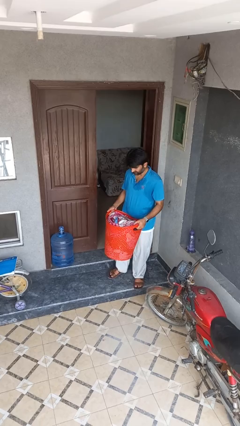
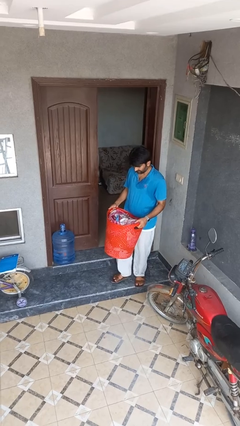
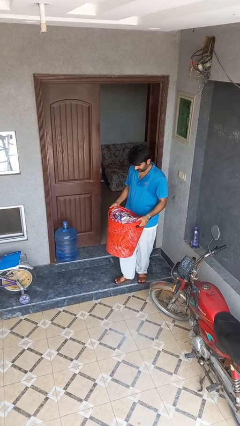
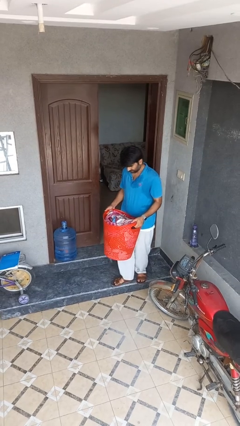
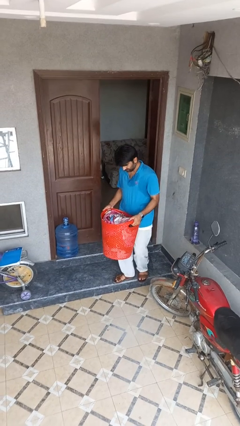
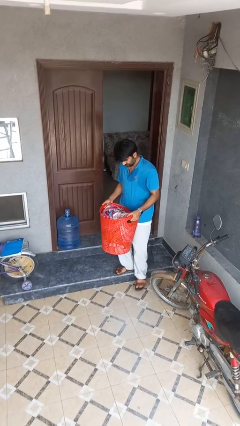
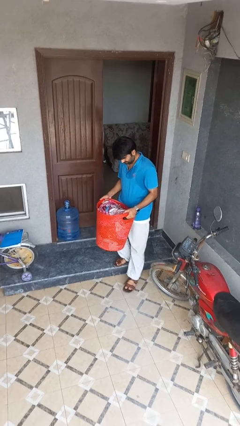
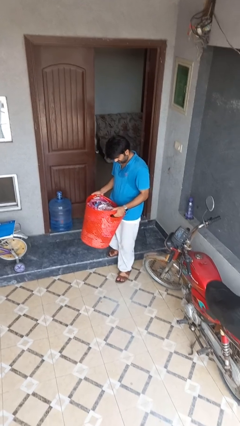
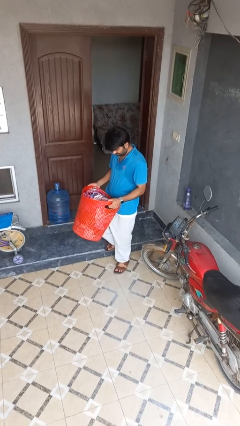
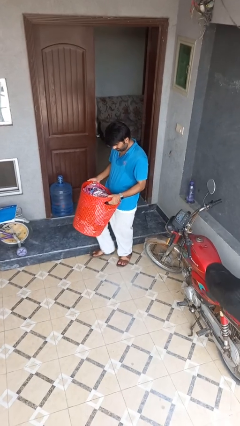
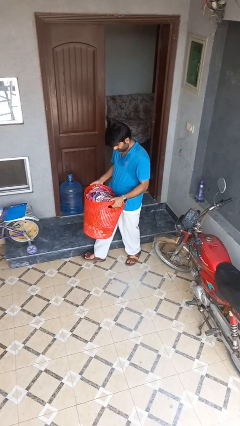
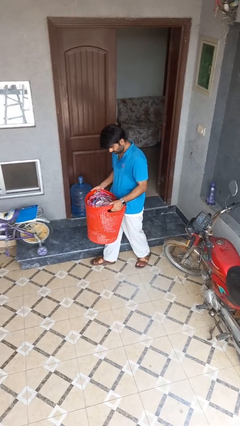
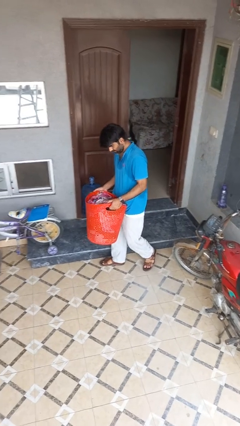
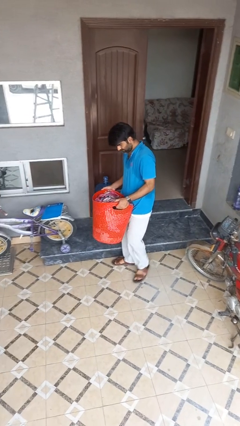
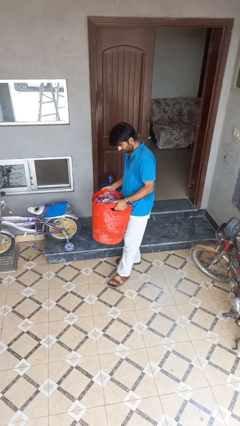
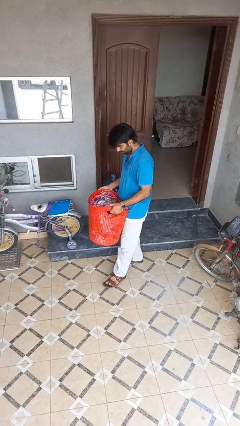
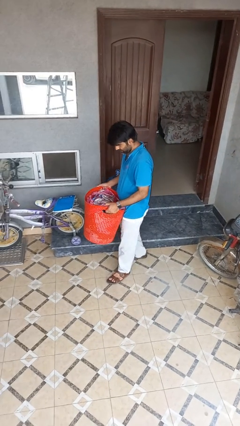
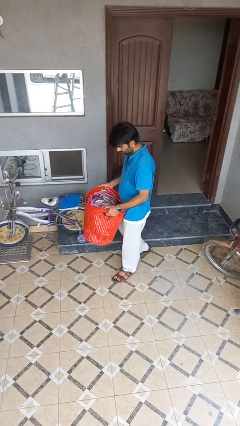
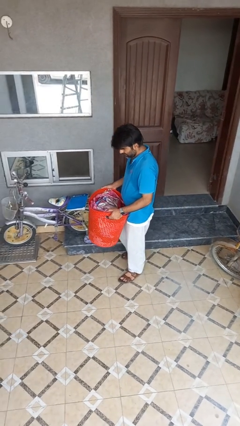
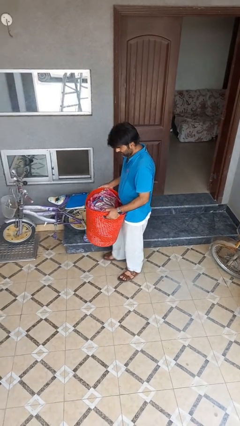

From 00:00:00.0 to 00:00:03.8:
person carries laundry basket

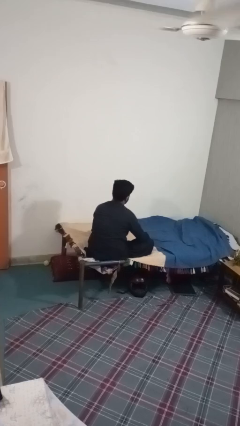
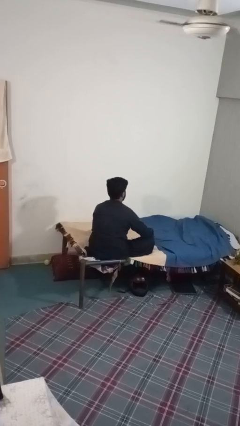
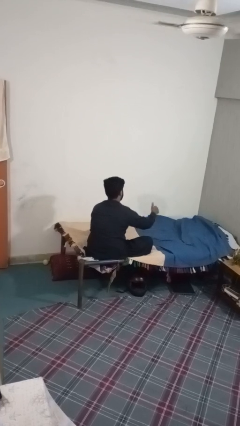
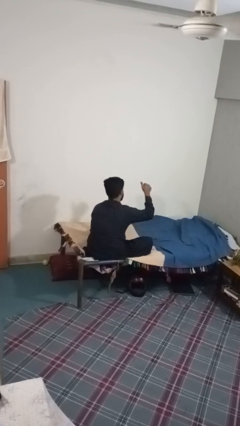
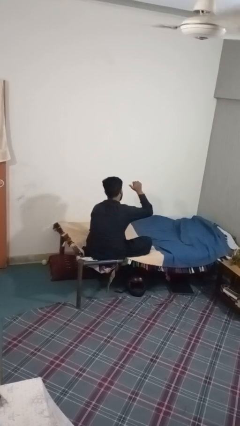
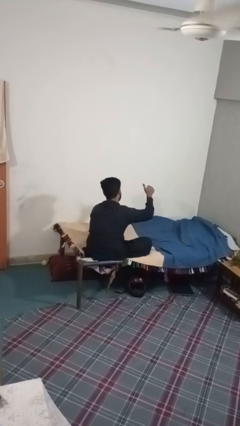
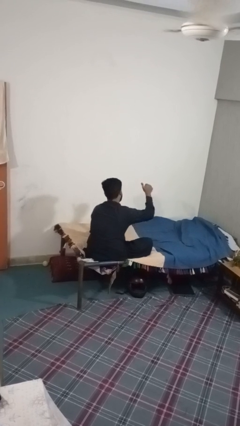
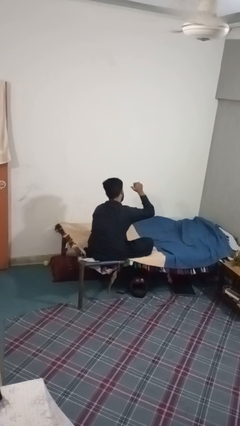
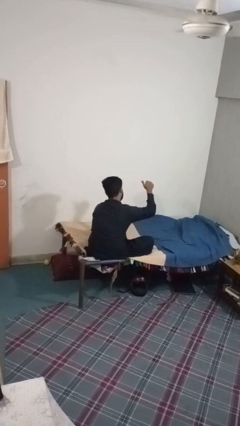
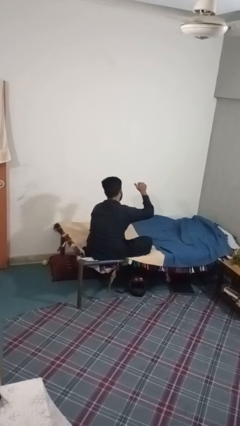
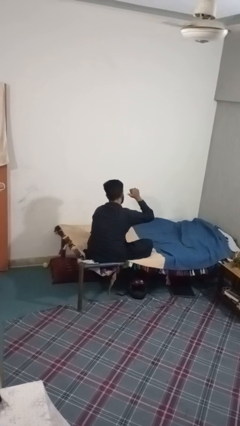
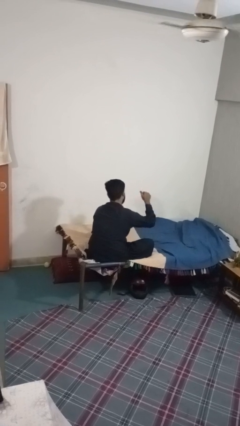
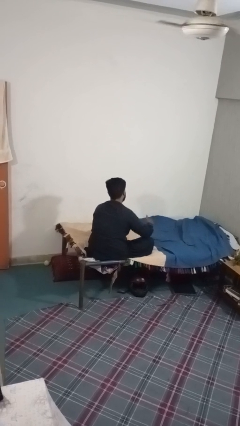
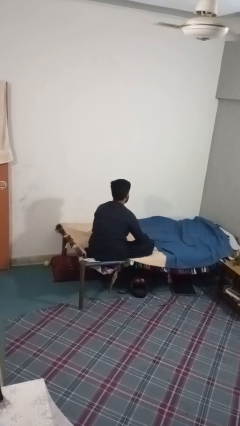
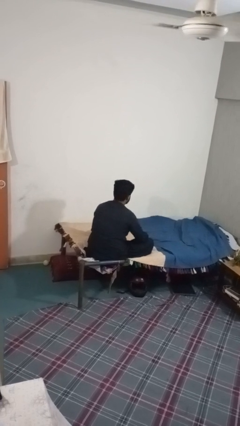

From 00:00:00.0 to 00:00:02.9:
person gestures behind me

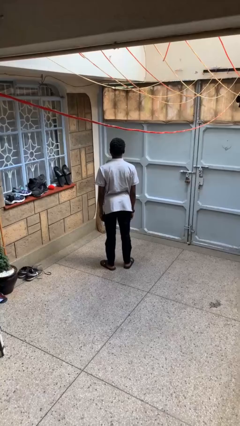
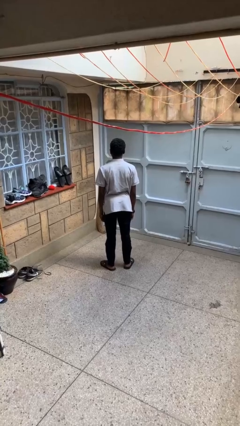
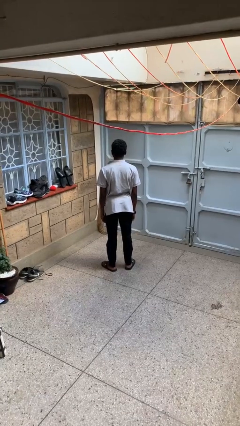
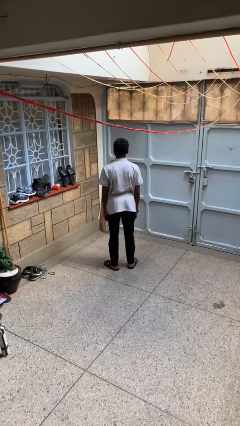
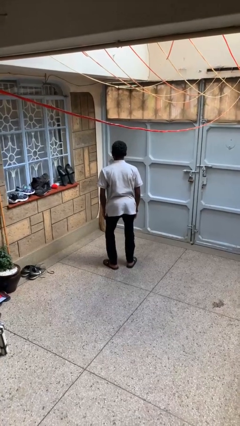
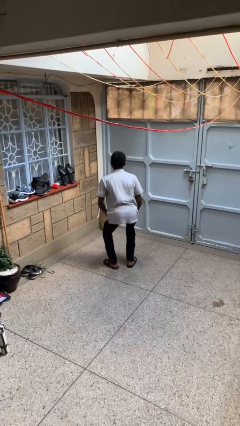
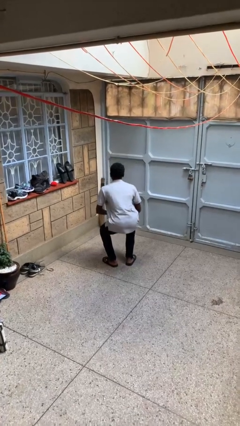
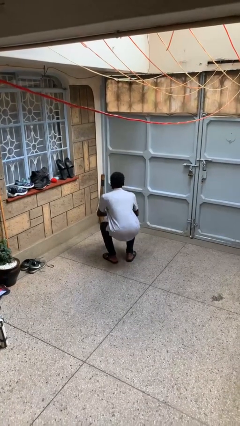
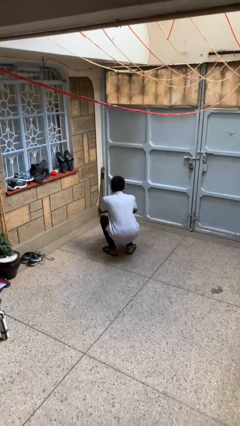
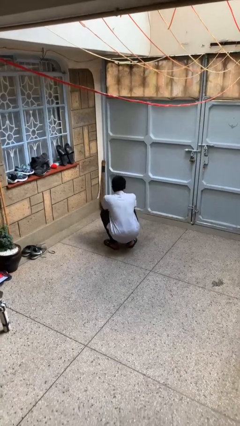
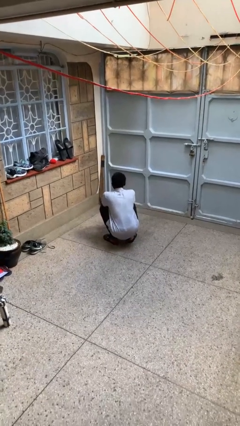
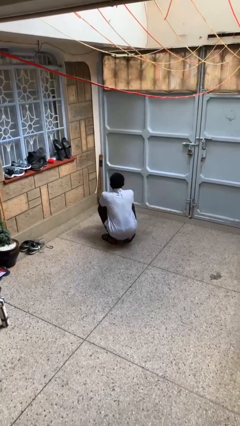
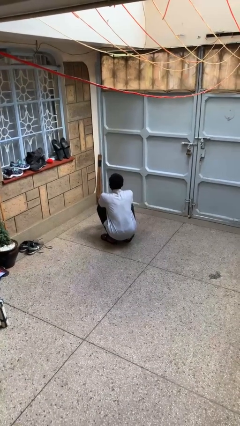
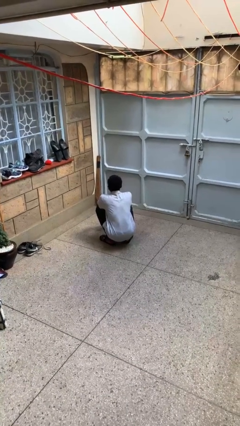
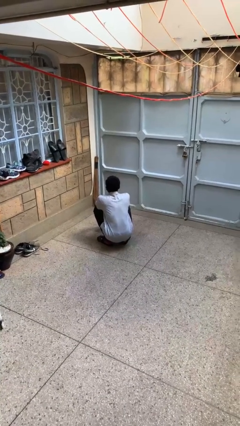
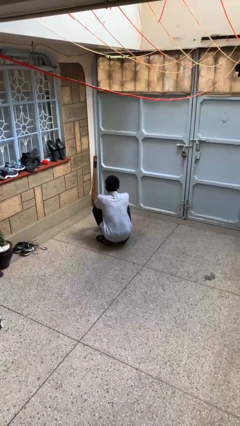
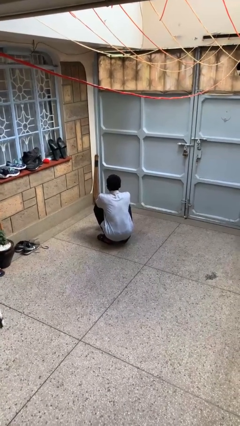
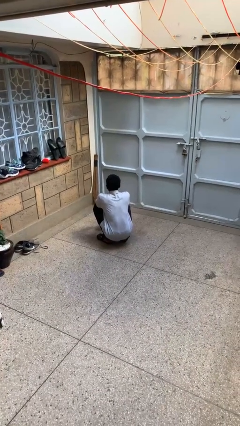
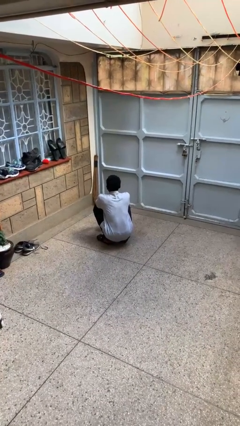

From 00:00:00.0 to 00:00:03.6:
person squats

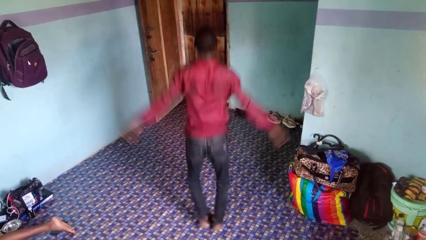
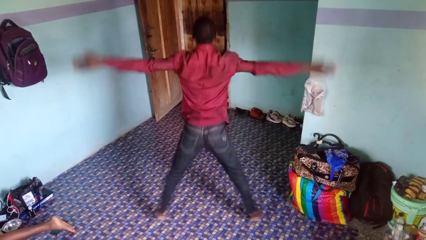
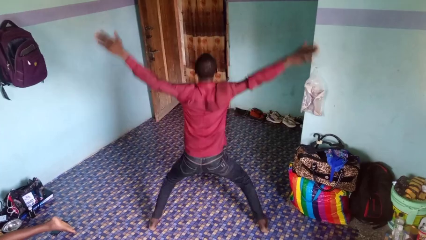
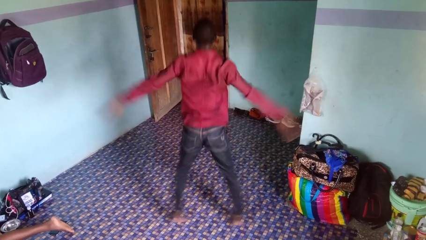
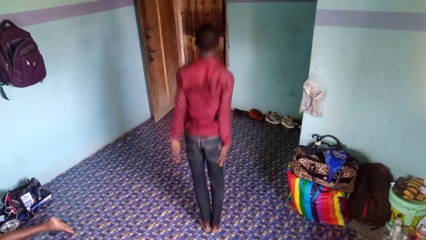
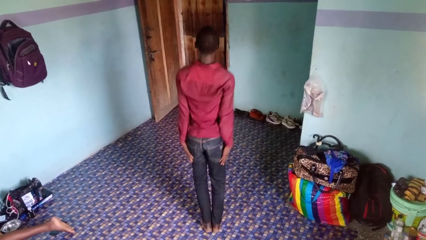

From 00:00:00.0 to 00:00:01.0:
person exercises with jumping jacks

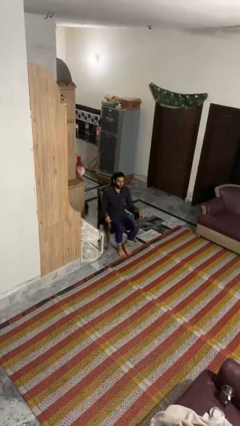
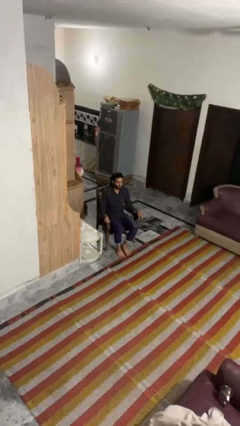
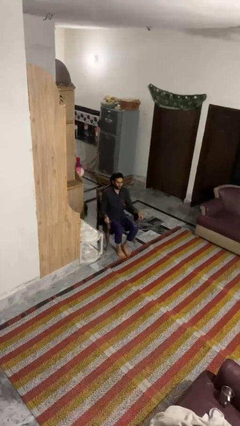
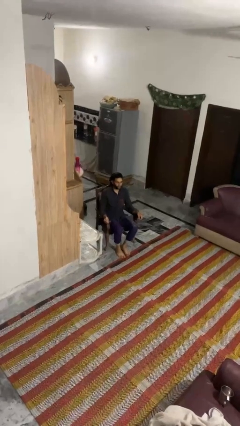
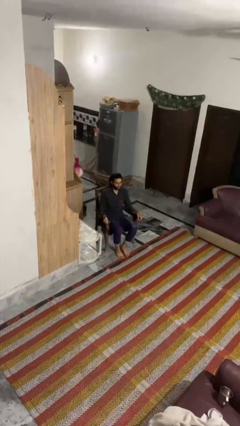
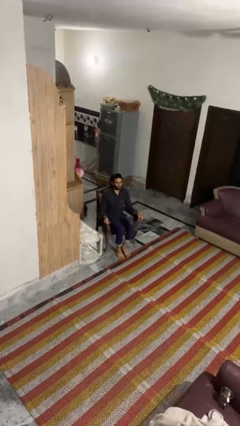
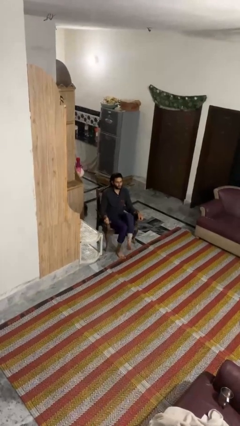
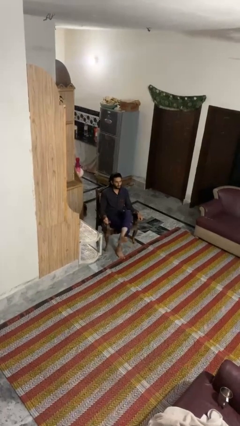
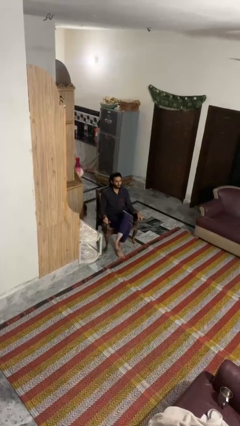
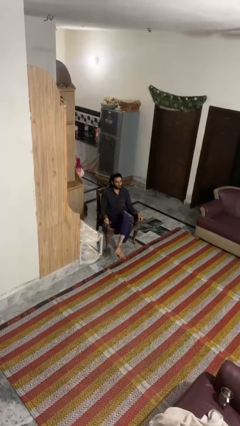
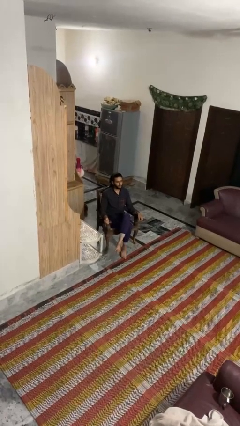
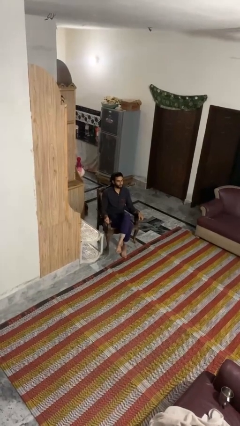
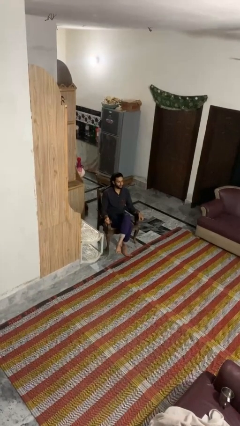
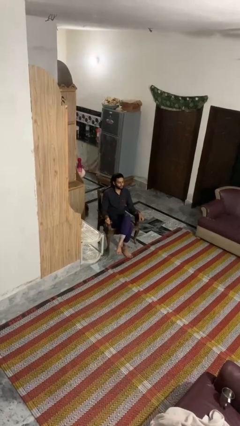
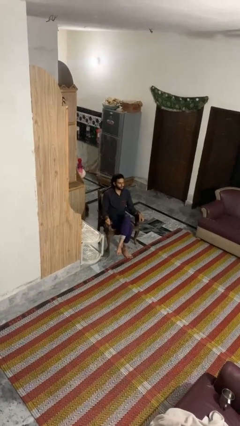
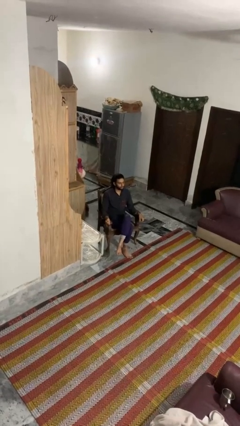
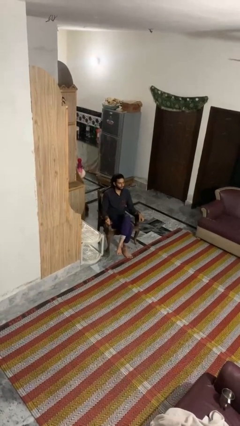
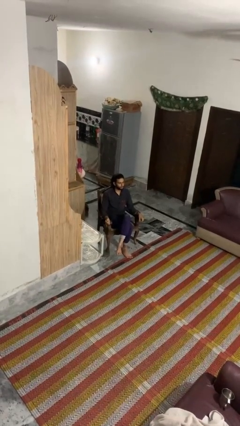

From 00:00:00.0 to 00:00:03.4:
person crosses legs

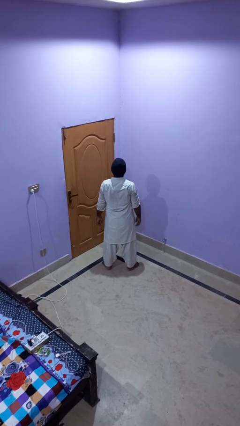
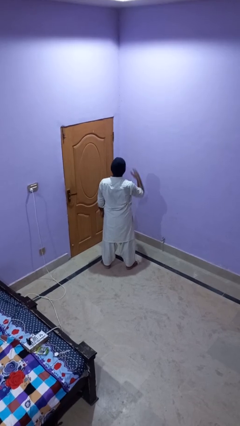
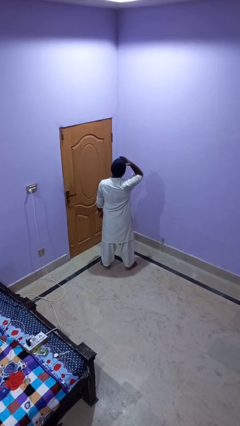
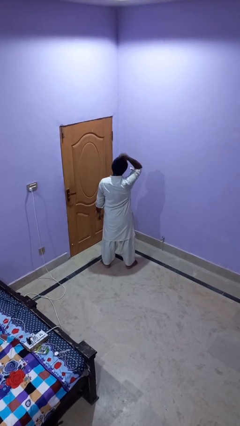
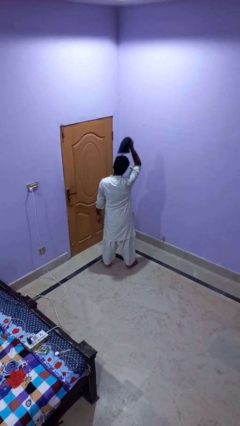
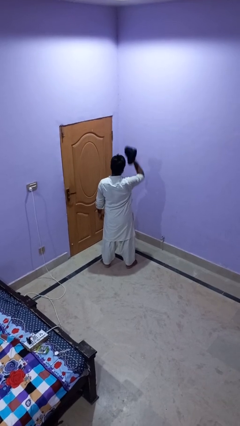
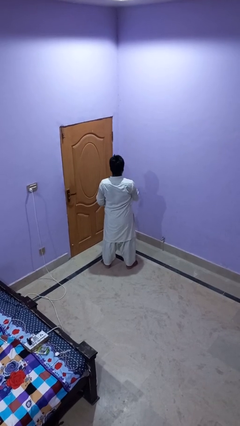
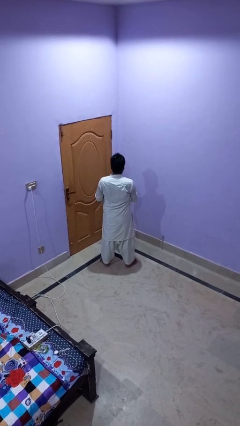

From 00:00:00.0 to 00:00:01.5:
person takes off hat

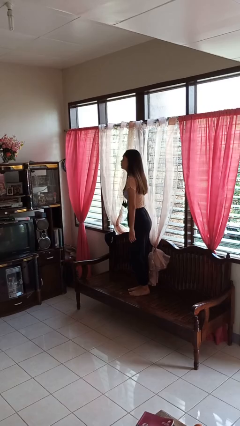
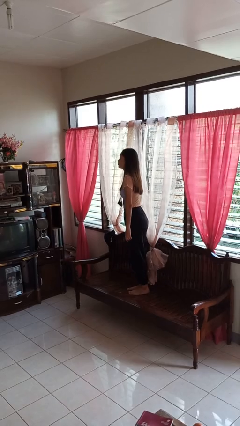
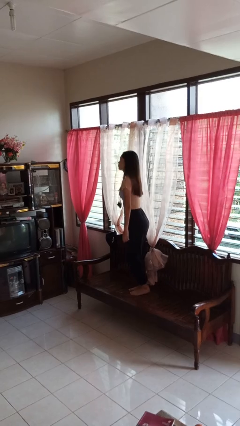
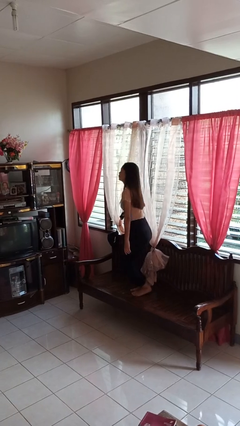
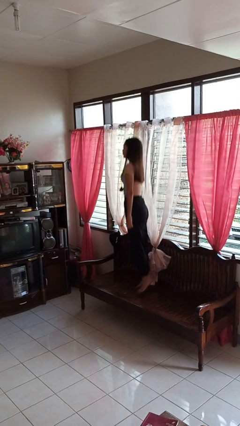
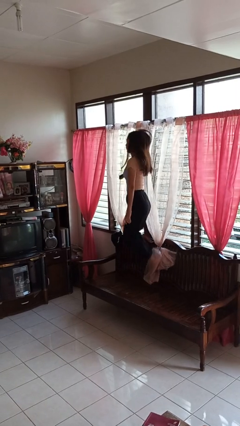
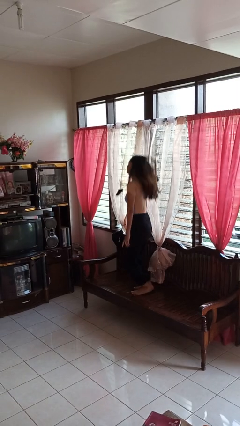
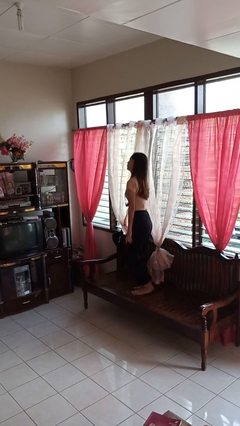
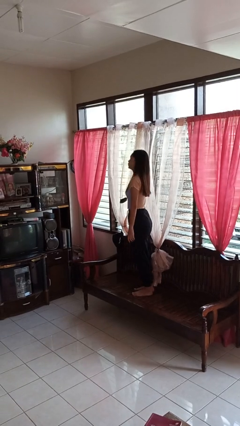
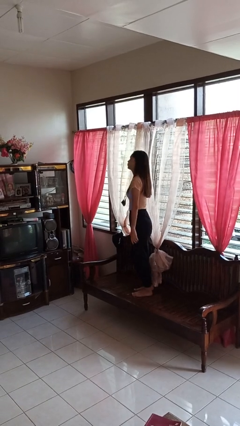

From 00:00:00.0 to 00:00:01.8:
person jumps on couch
